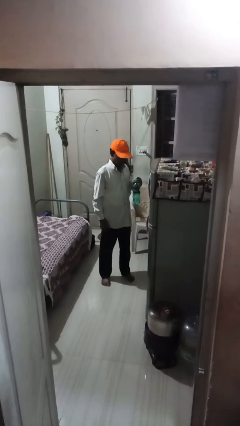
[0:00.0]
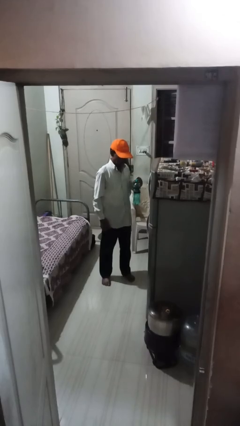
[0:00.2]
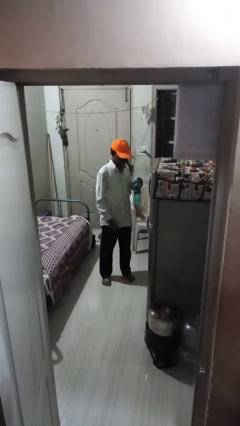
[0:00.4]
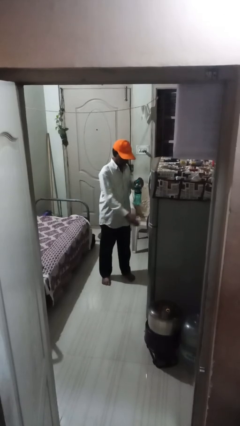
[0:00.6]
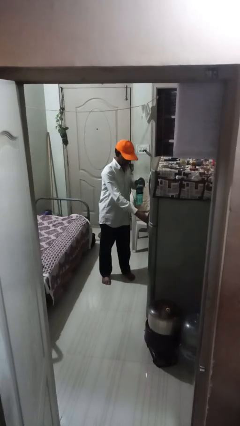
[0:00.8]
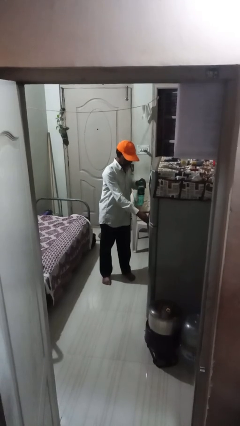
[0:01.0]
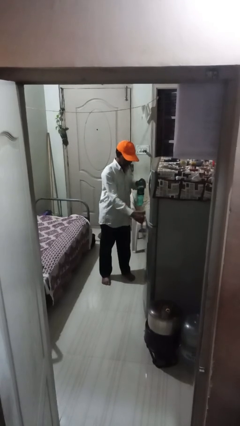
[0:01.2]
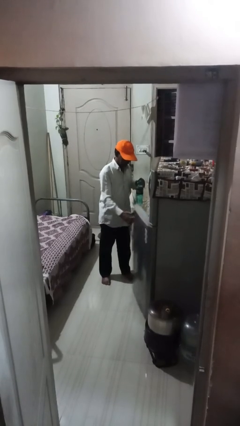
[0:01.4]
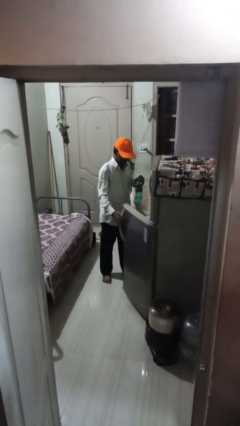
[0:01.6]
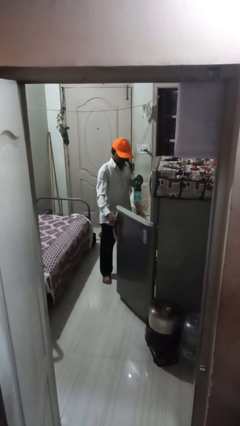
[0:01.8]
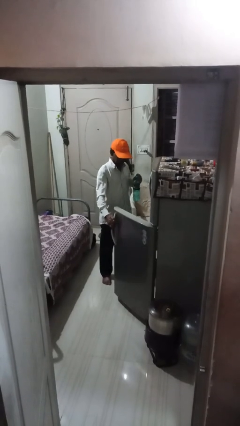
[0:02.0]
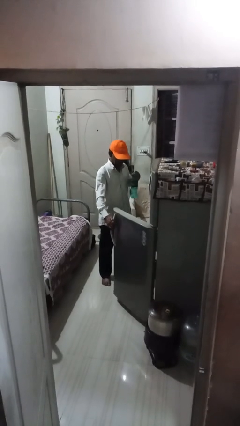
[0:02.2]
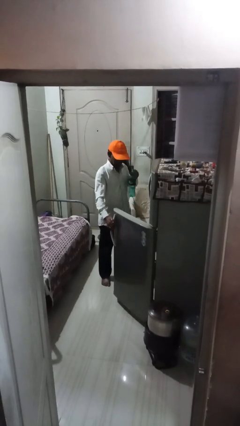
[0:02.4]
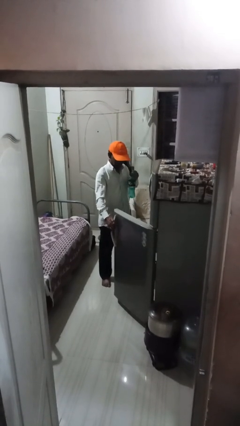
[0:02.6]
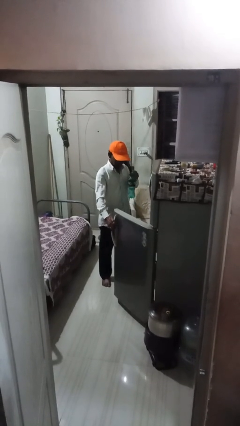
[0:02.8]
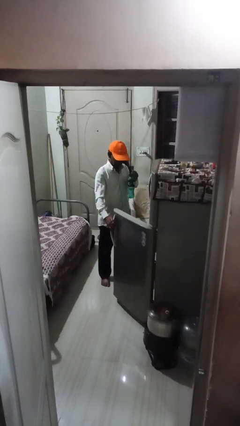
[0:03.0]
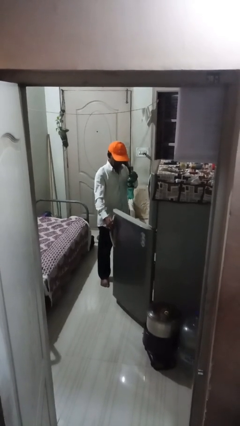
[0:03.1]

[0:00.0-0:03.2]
person opens refrigerator

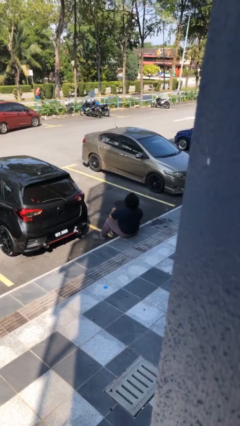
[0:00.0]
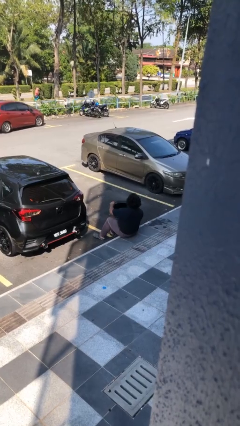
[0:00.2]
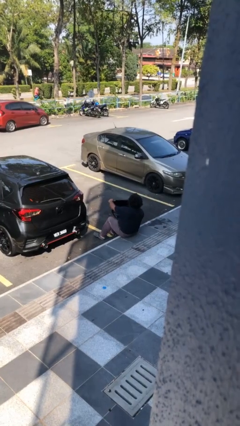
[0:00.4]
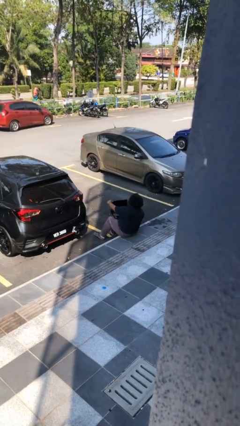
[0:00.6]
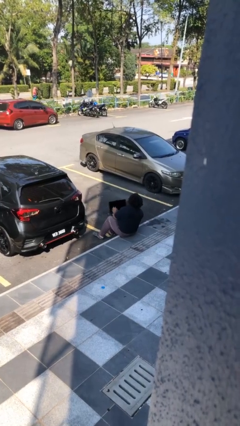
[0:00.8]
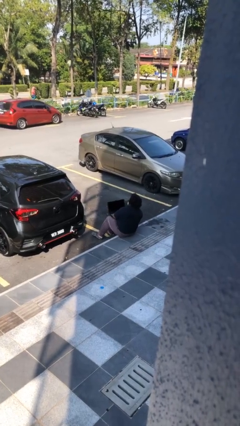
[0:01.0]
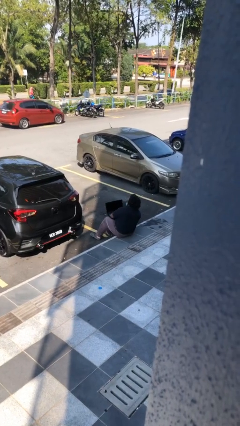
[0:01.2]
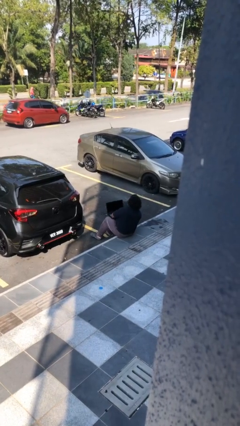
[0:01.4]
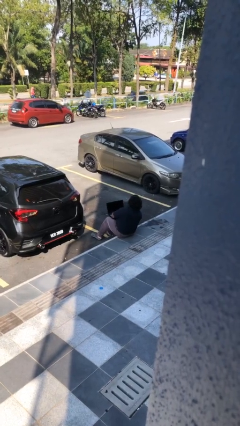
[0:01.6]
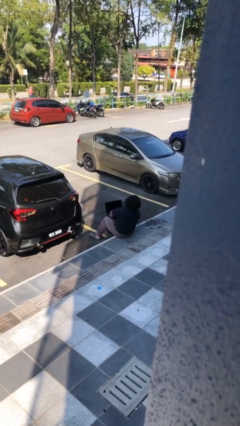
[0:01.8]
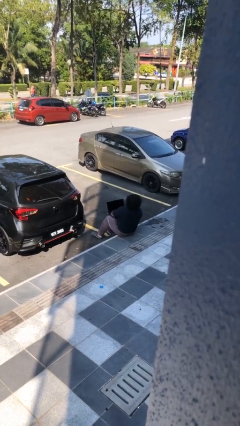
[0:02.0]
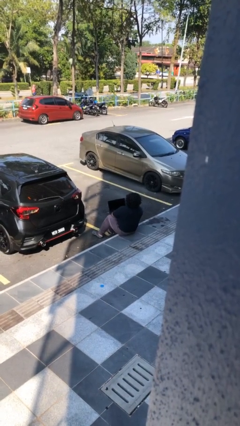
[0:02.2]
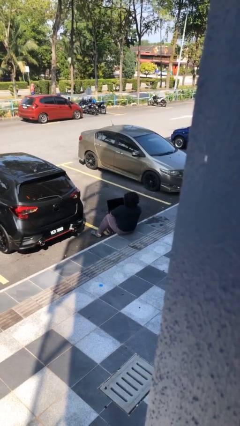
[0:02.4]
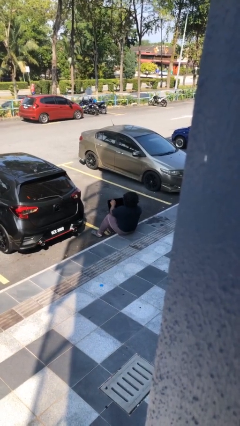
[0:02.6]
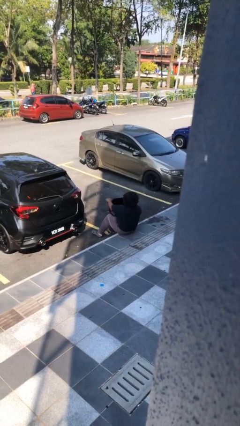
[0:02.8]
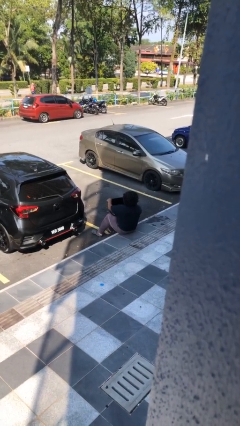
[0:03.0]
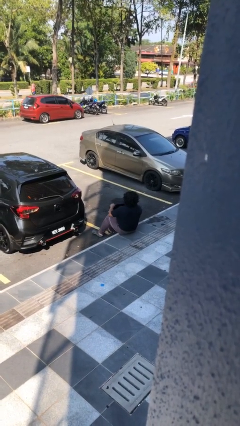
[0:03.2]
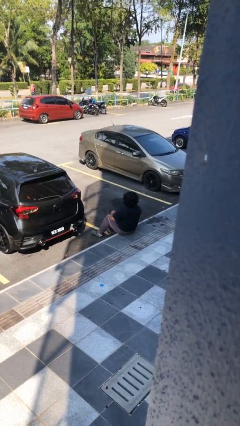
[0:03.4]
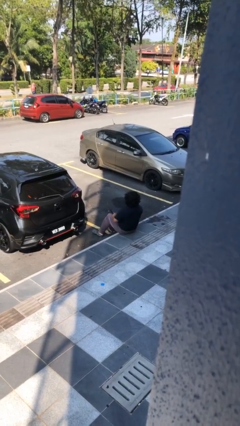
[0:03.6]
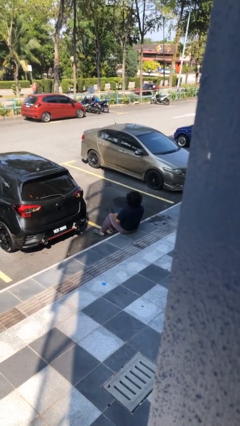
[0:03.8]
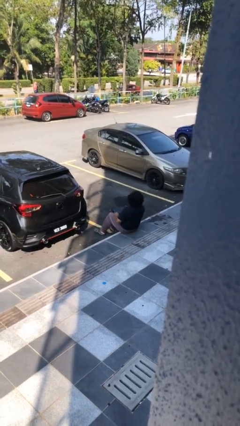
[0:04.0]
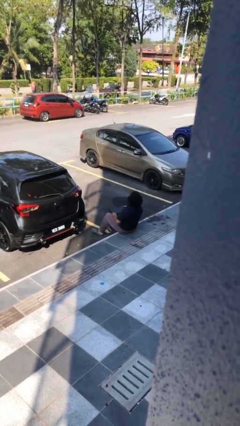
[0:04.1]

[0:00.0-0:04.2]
person interacts with laptop

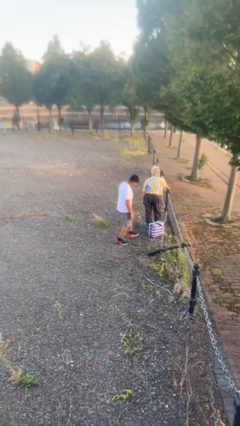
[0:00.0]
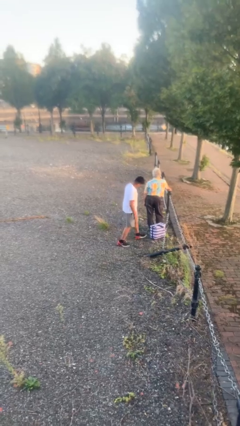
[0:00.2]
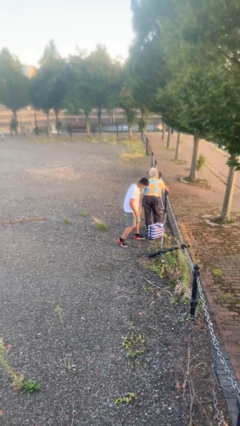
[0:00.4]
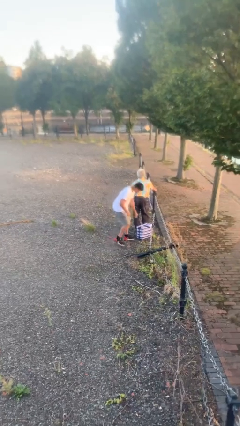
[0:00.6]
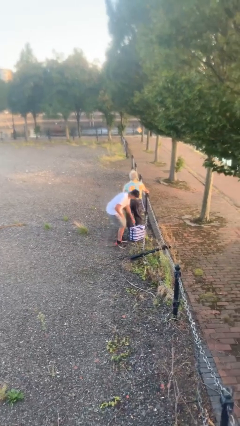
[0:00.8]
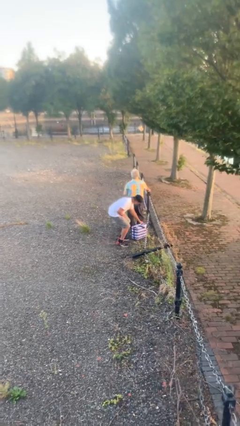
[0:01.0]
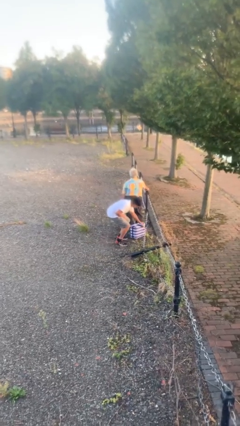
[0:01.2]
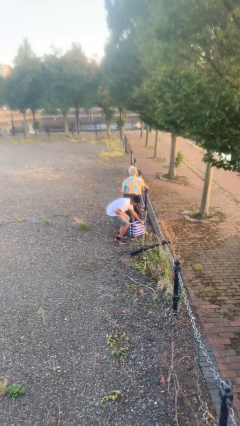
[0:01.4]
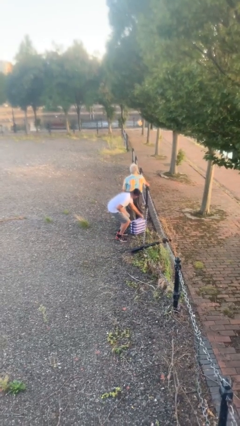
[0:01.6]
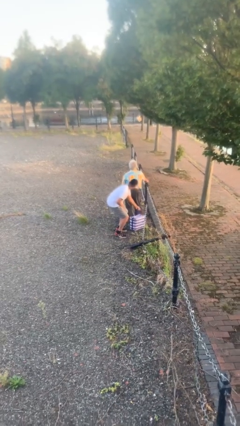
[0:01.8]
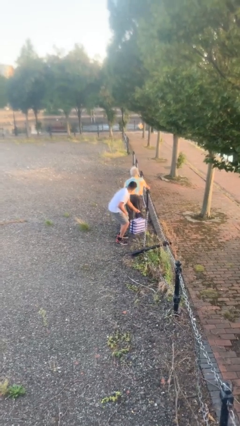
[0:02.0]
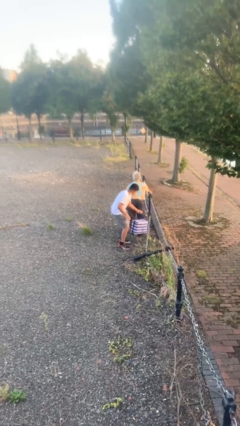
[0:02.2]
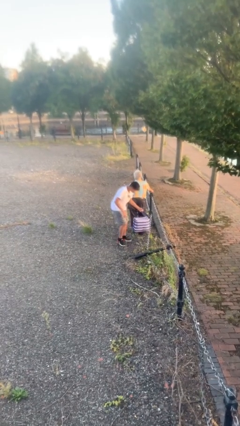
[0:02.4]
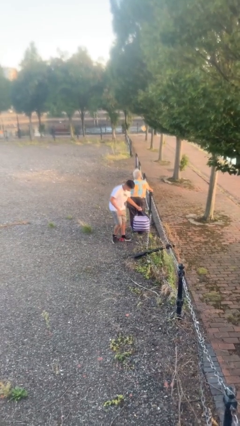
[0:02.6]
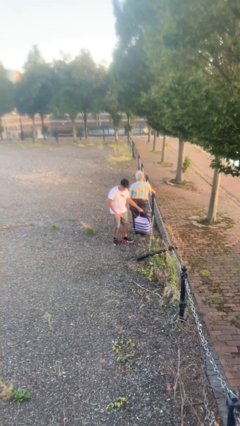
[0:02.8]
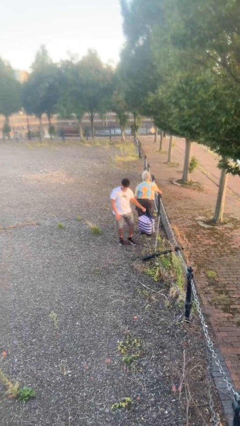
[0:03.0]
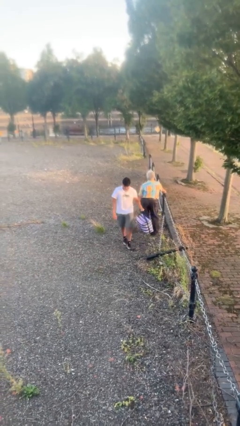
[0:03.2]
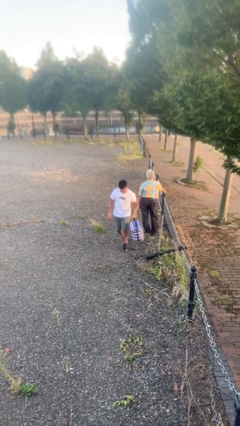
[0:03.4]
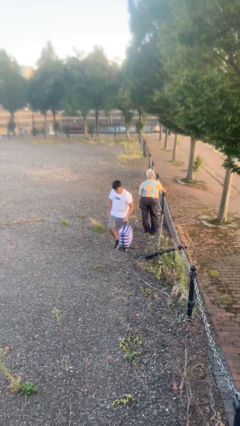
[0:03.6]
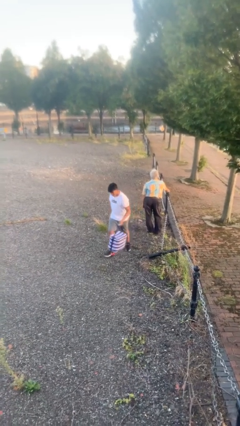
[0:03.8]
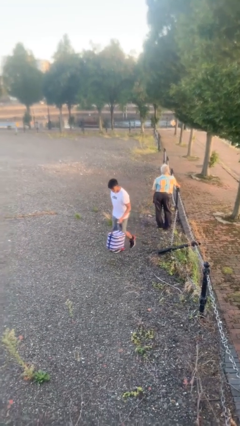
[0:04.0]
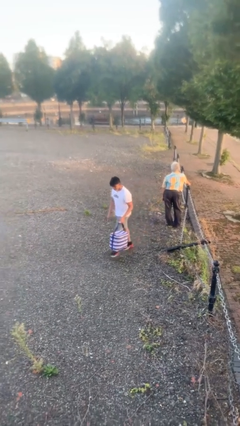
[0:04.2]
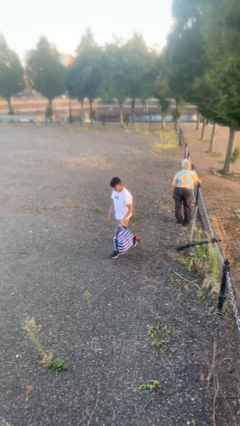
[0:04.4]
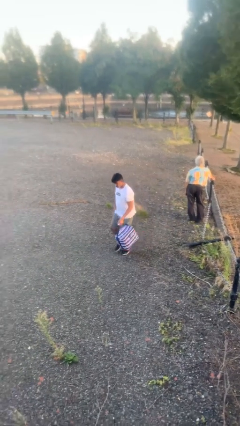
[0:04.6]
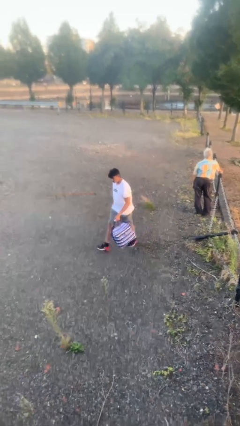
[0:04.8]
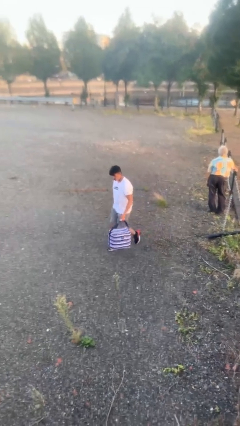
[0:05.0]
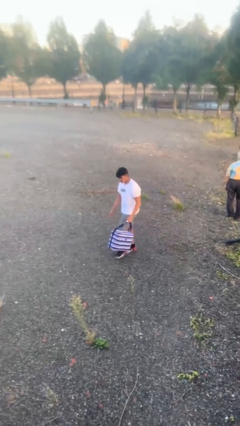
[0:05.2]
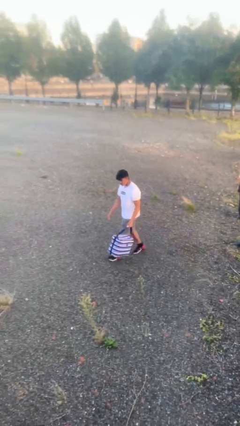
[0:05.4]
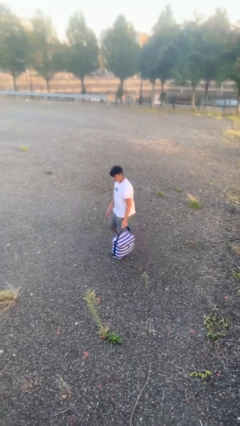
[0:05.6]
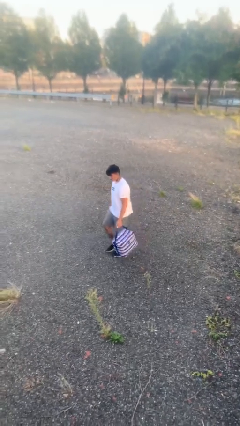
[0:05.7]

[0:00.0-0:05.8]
person steals object from person

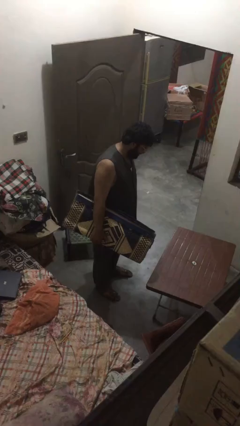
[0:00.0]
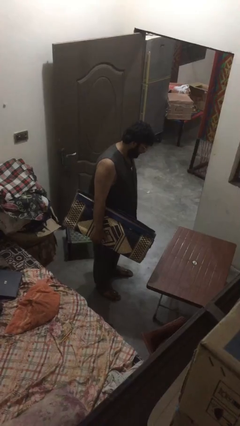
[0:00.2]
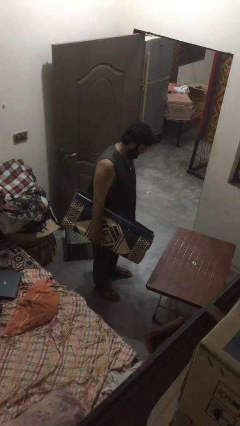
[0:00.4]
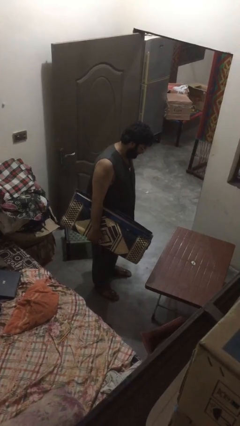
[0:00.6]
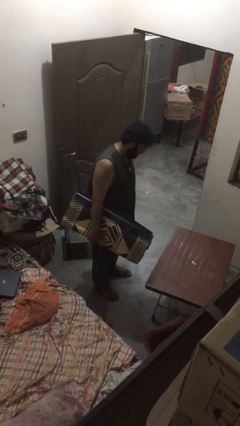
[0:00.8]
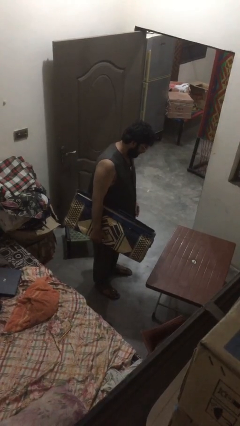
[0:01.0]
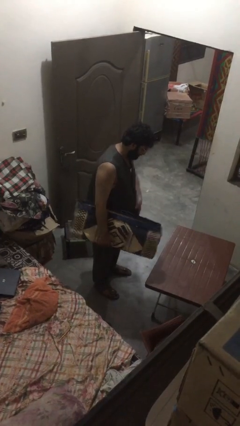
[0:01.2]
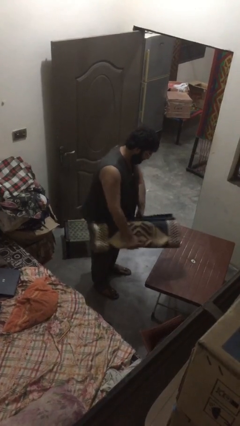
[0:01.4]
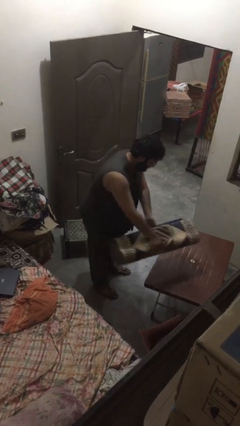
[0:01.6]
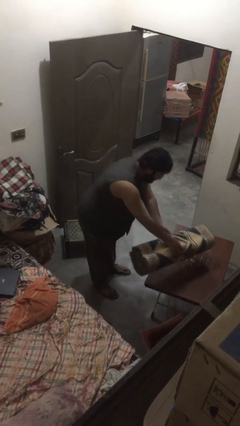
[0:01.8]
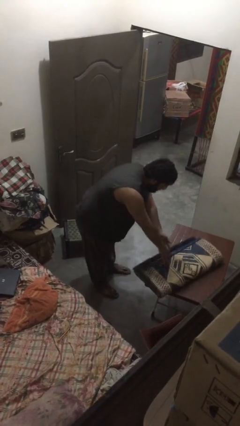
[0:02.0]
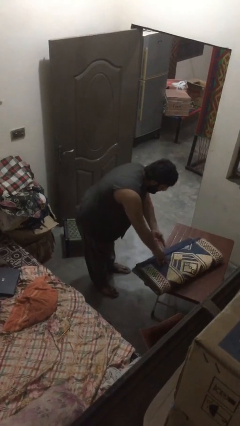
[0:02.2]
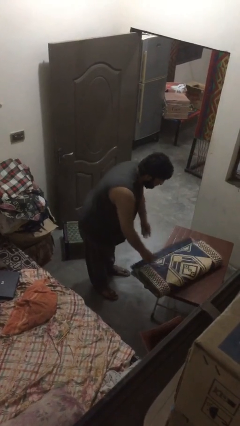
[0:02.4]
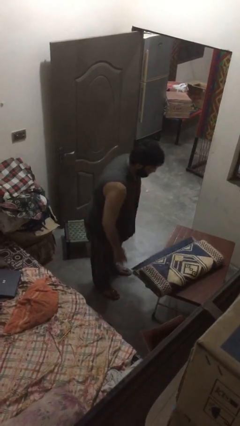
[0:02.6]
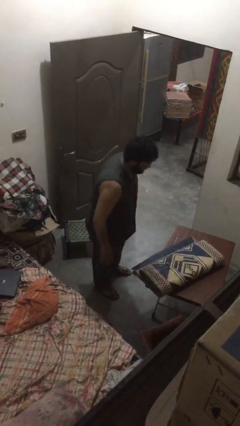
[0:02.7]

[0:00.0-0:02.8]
person puts down object on table

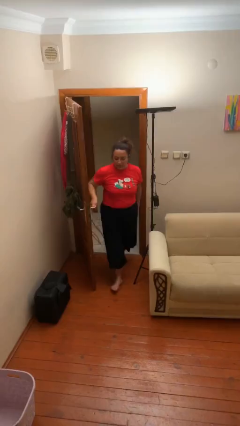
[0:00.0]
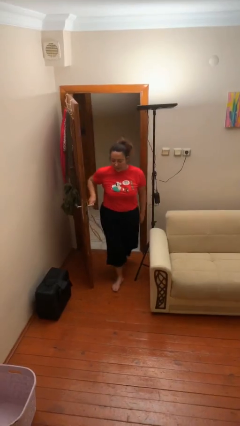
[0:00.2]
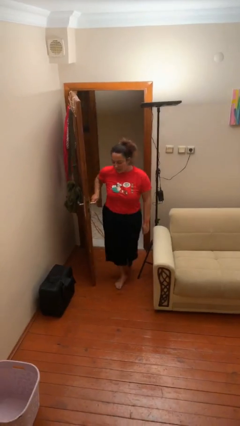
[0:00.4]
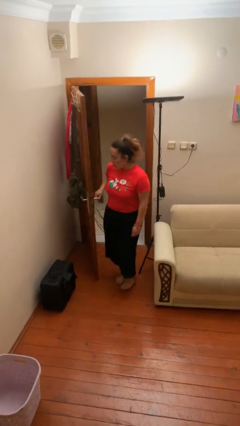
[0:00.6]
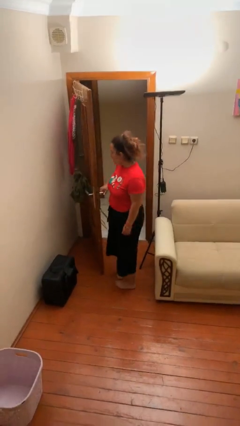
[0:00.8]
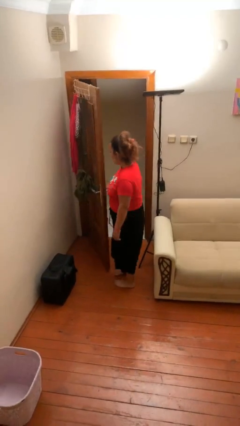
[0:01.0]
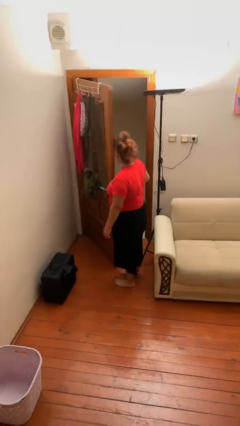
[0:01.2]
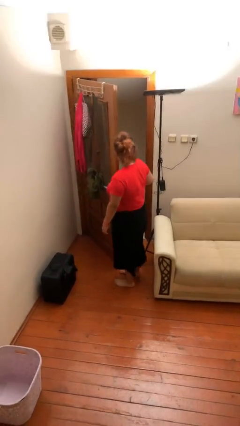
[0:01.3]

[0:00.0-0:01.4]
person enters scene through structure
